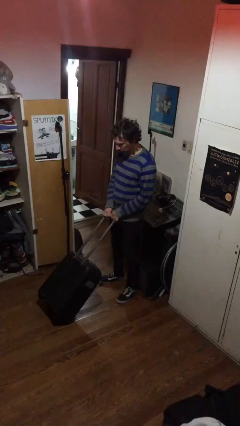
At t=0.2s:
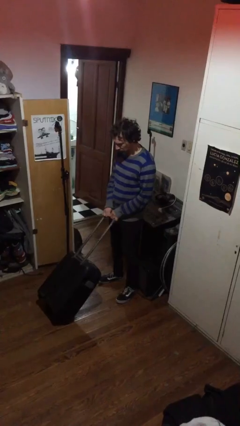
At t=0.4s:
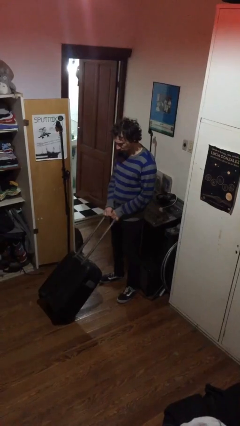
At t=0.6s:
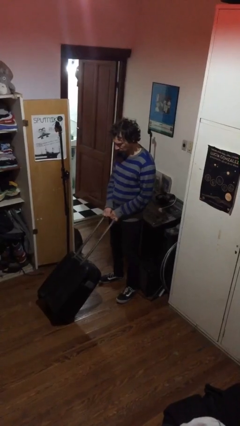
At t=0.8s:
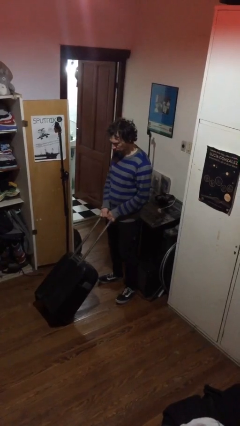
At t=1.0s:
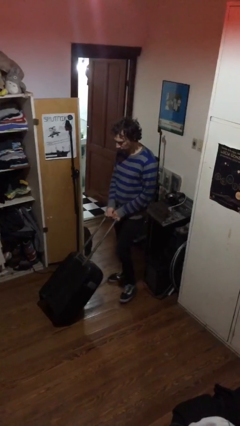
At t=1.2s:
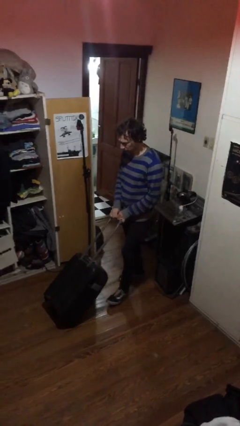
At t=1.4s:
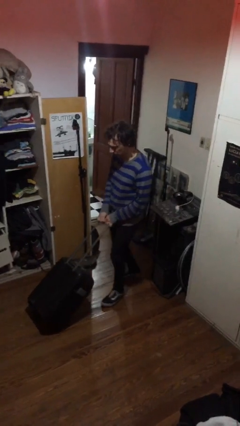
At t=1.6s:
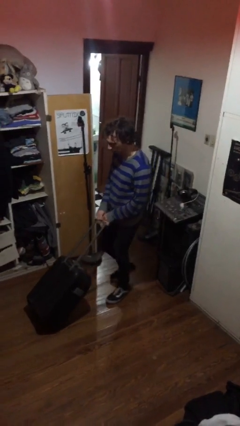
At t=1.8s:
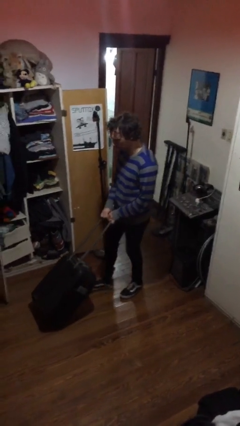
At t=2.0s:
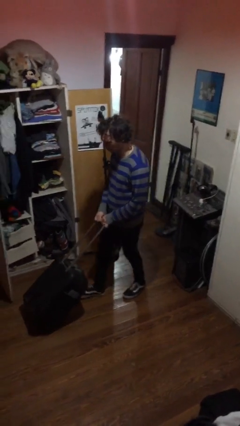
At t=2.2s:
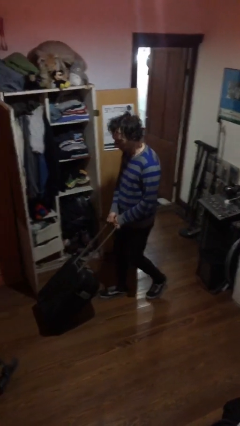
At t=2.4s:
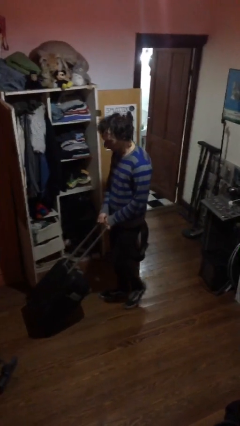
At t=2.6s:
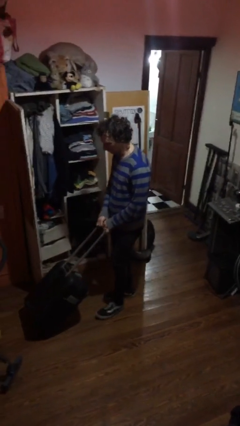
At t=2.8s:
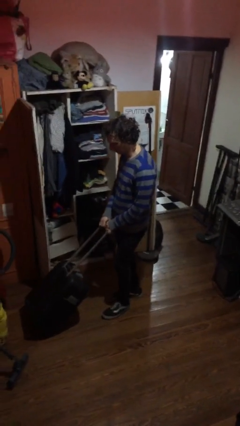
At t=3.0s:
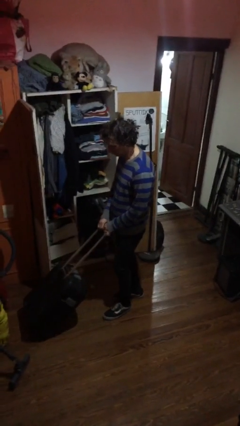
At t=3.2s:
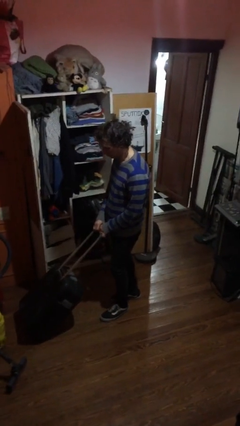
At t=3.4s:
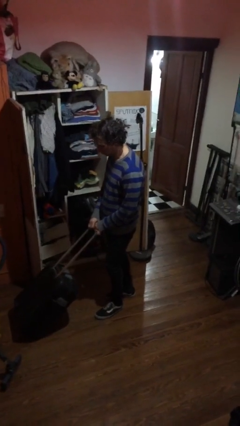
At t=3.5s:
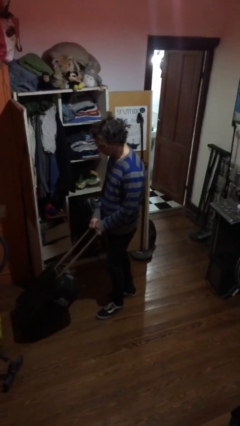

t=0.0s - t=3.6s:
person pushes wheeled cart

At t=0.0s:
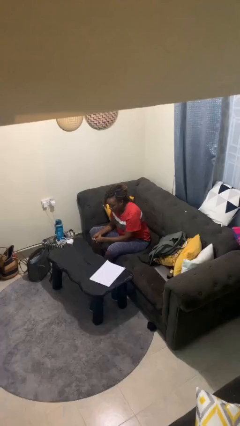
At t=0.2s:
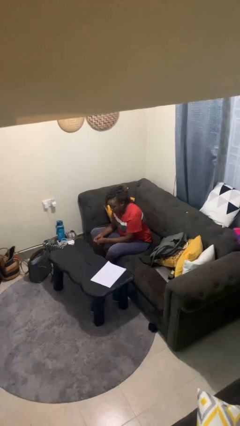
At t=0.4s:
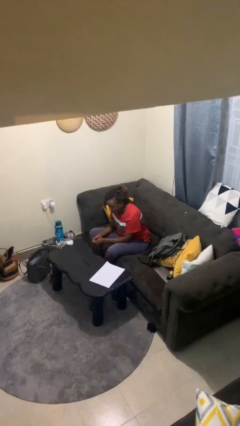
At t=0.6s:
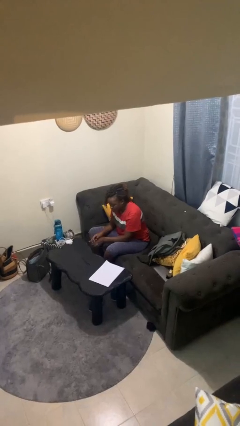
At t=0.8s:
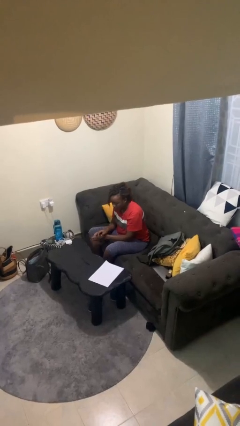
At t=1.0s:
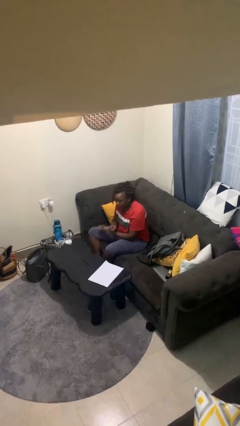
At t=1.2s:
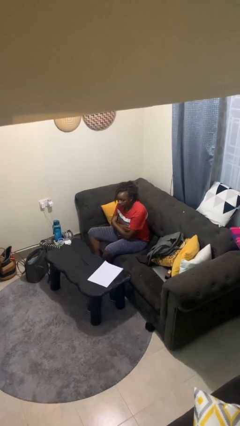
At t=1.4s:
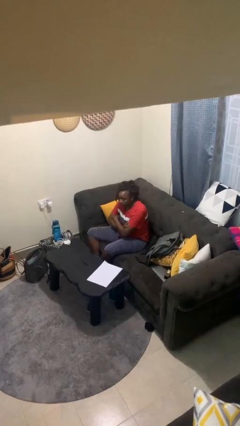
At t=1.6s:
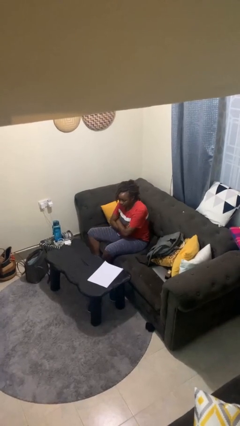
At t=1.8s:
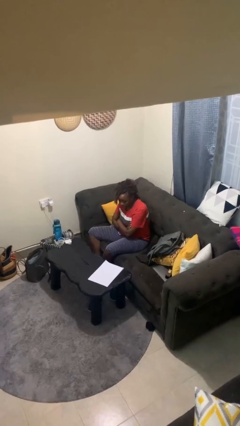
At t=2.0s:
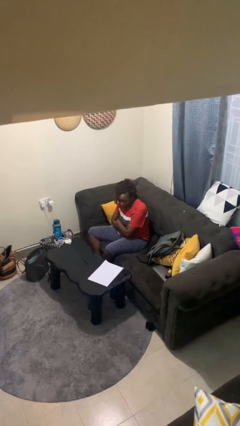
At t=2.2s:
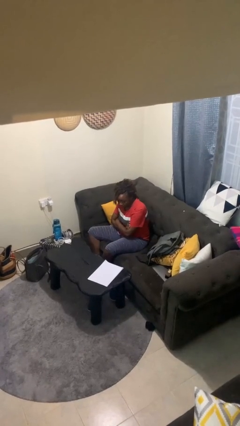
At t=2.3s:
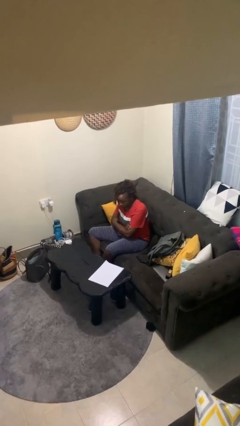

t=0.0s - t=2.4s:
person crosses arms

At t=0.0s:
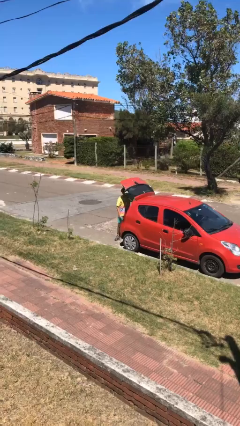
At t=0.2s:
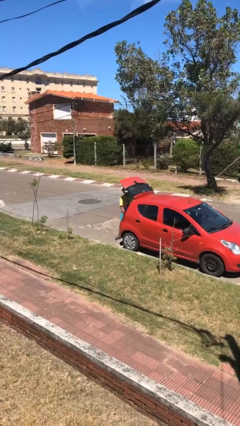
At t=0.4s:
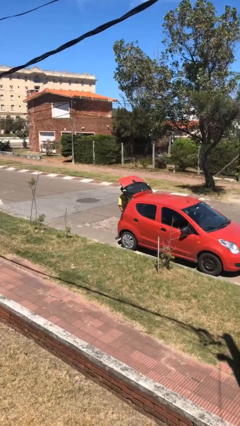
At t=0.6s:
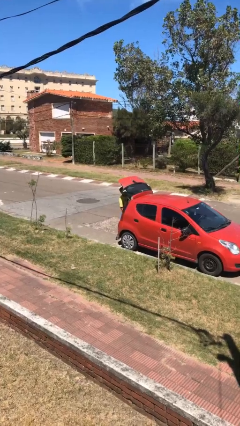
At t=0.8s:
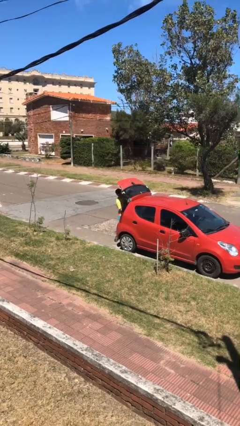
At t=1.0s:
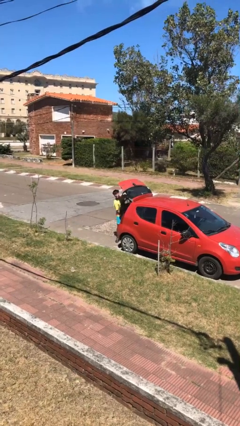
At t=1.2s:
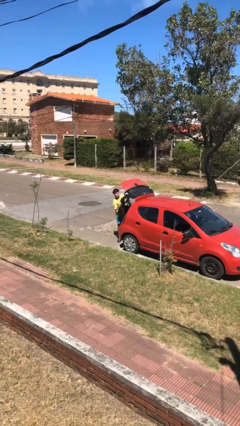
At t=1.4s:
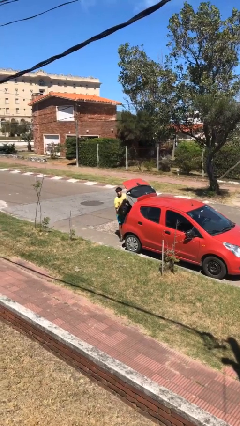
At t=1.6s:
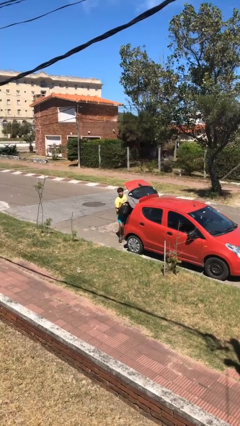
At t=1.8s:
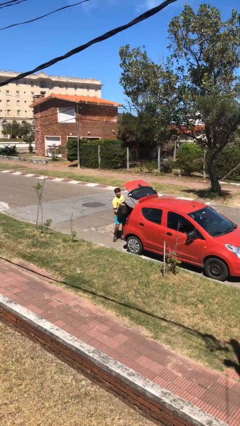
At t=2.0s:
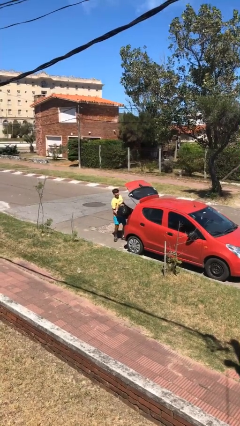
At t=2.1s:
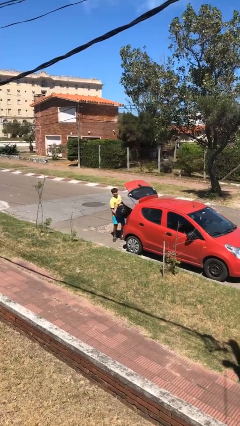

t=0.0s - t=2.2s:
person unloads car

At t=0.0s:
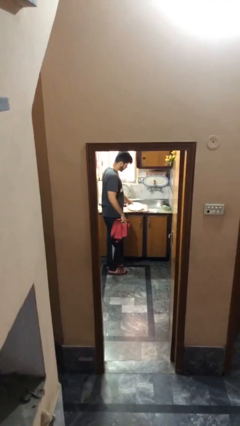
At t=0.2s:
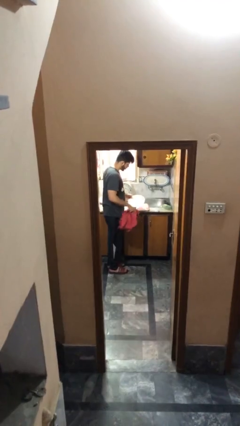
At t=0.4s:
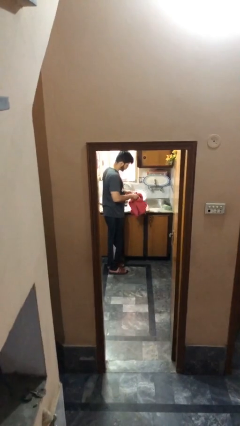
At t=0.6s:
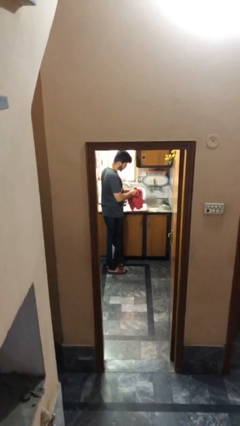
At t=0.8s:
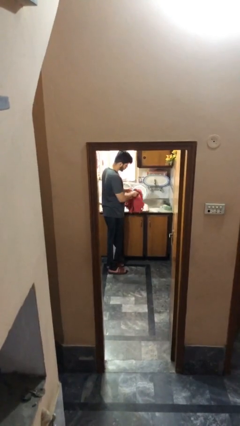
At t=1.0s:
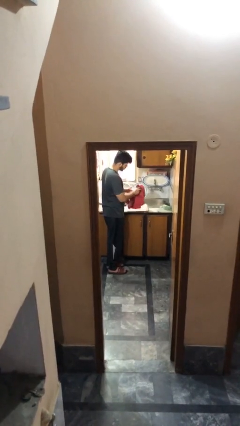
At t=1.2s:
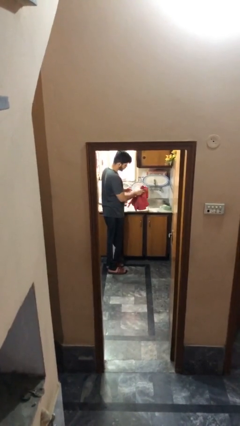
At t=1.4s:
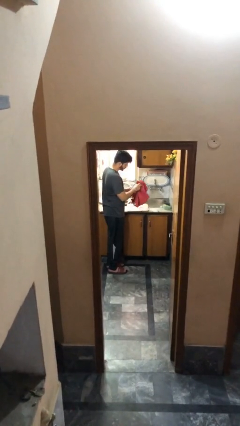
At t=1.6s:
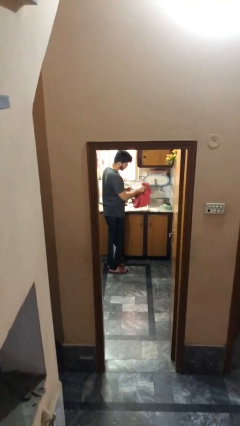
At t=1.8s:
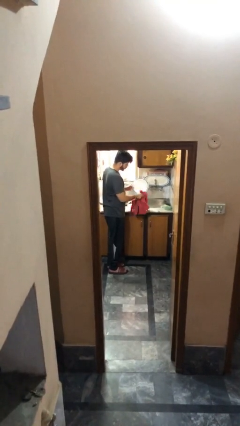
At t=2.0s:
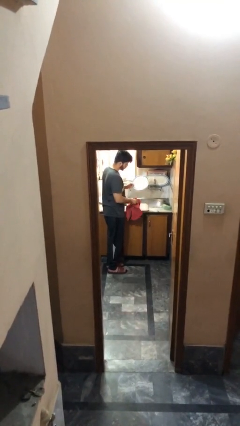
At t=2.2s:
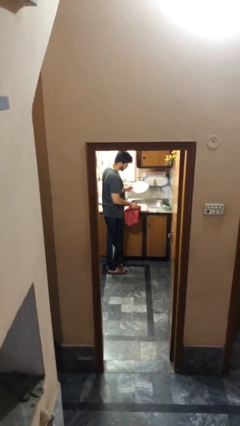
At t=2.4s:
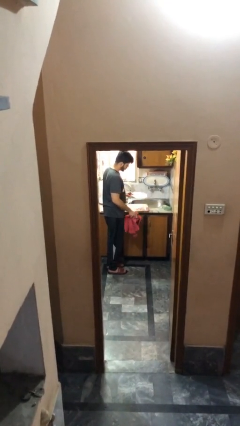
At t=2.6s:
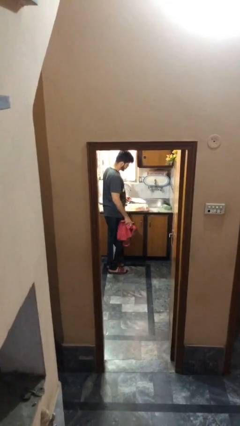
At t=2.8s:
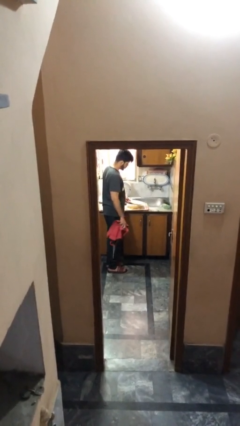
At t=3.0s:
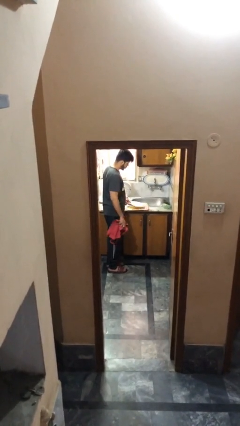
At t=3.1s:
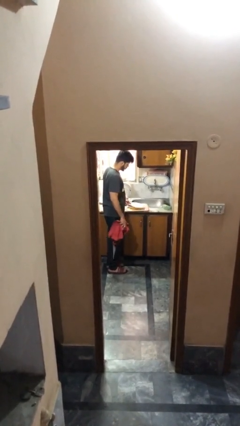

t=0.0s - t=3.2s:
person dries dish

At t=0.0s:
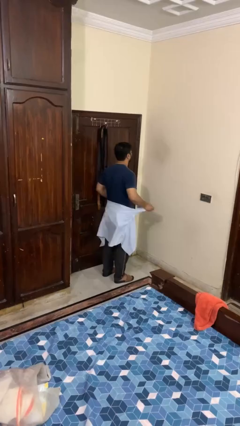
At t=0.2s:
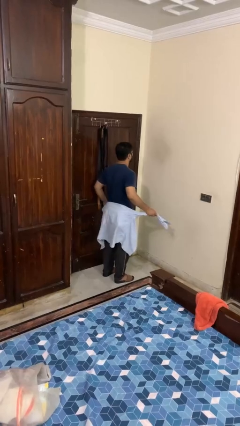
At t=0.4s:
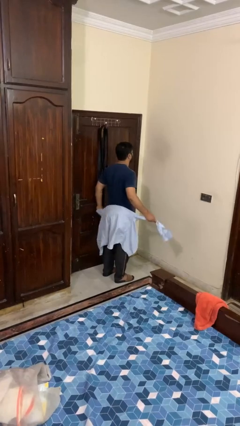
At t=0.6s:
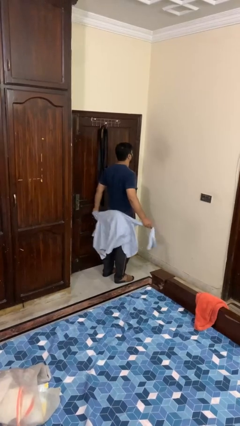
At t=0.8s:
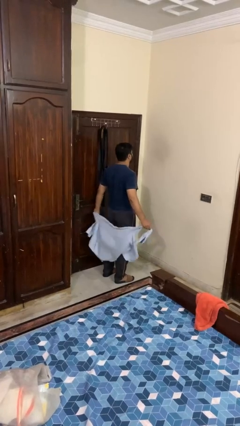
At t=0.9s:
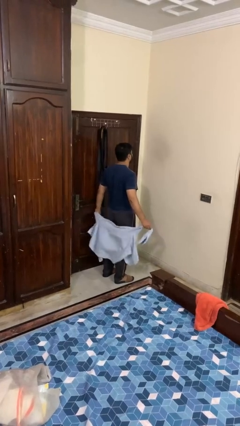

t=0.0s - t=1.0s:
person unties jacket around waist

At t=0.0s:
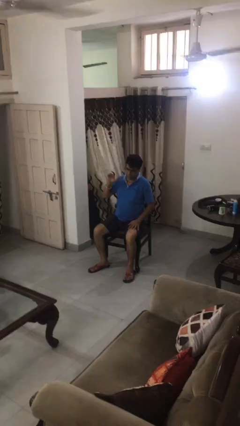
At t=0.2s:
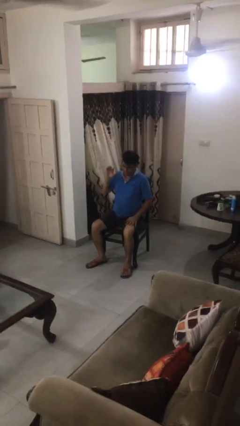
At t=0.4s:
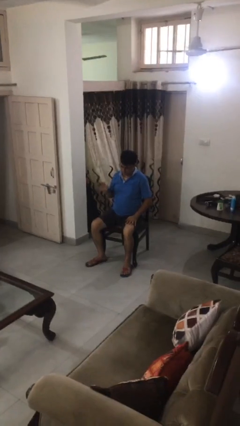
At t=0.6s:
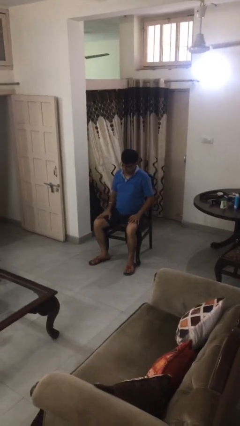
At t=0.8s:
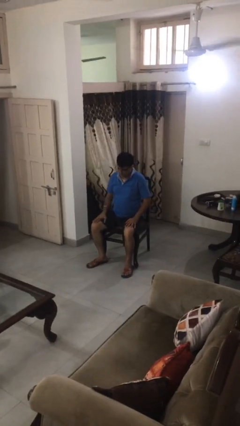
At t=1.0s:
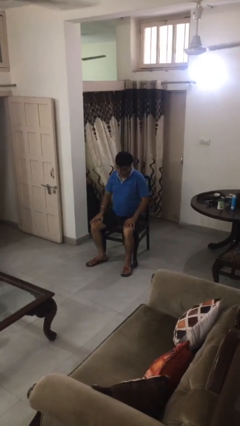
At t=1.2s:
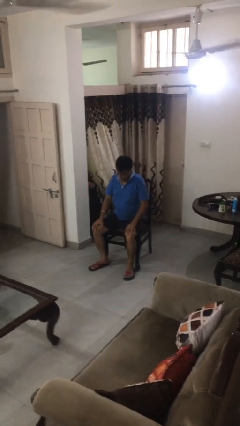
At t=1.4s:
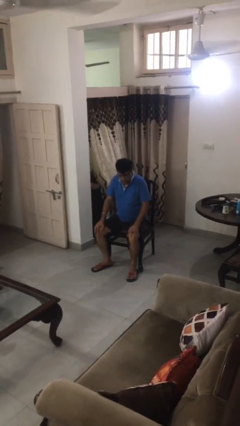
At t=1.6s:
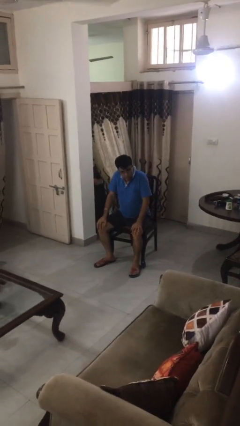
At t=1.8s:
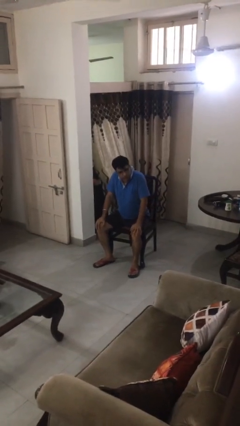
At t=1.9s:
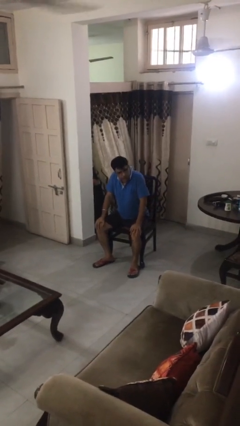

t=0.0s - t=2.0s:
person slaps hands on thighs

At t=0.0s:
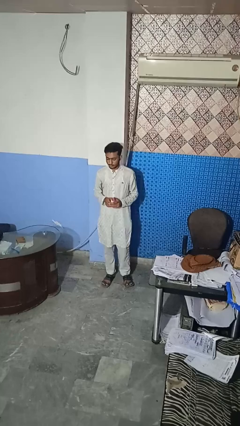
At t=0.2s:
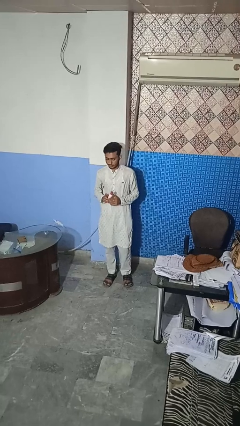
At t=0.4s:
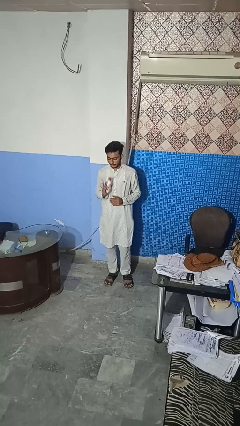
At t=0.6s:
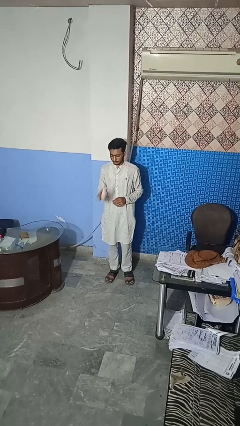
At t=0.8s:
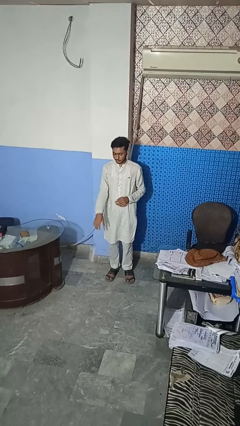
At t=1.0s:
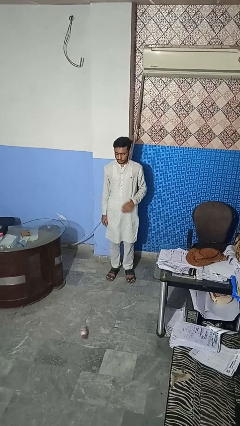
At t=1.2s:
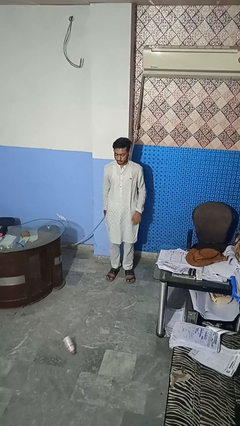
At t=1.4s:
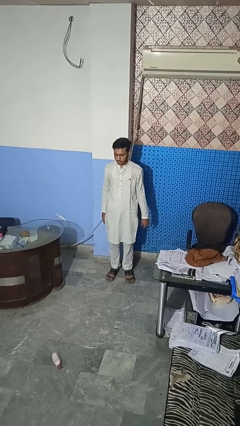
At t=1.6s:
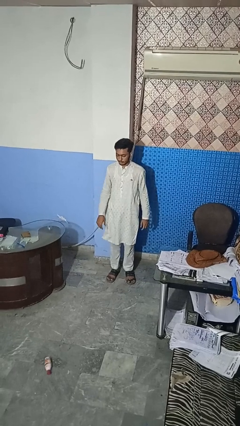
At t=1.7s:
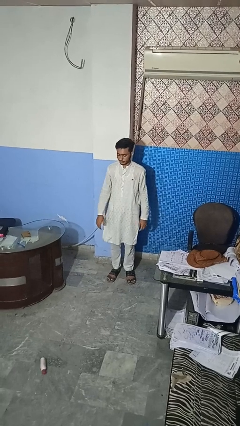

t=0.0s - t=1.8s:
person throws object to ground

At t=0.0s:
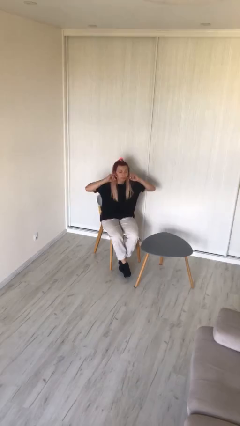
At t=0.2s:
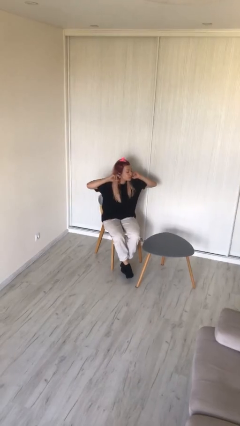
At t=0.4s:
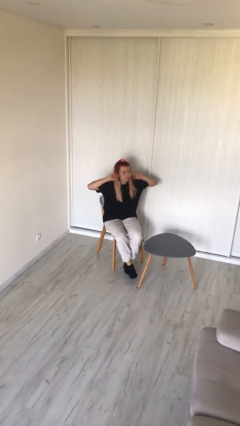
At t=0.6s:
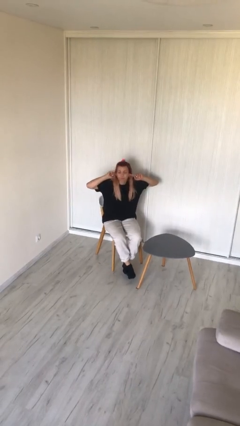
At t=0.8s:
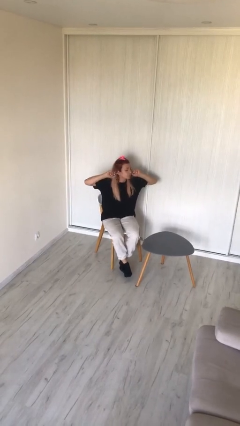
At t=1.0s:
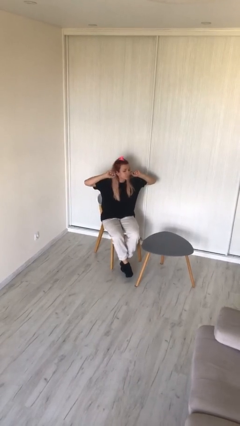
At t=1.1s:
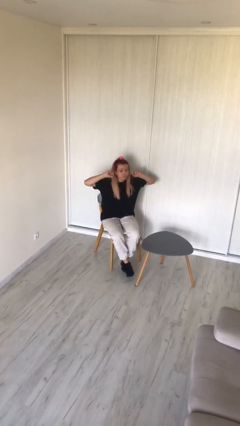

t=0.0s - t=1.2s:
person puts fingers in ear
